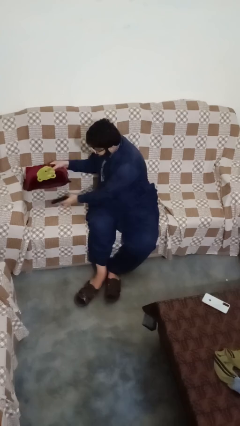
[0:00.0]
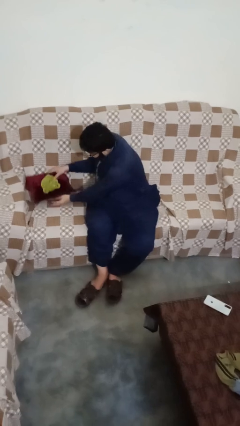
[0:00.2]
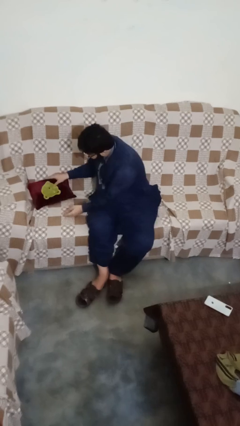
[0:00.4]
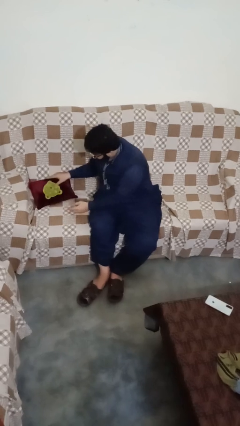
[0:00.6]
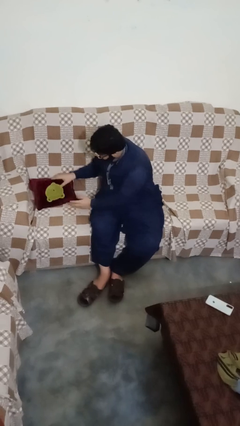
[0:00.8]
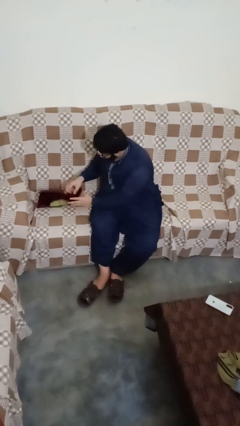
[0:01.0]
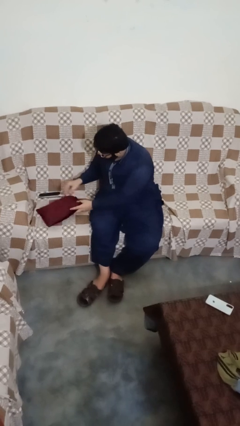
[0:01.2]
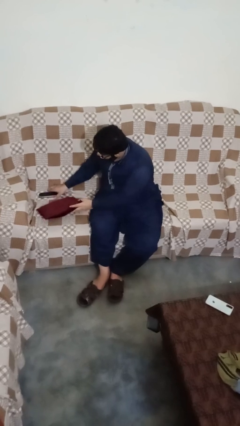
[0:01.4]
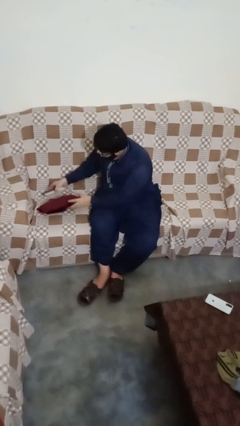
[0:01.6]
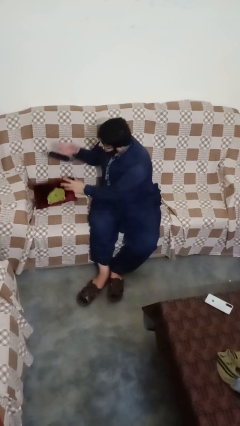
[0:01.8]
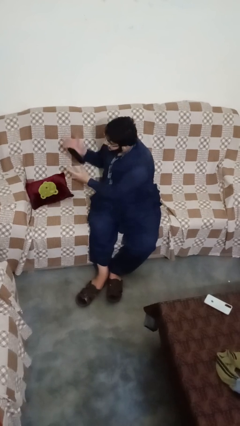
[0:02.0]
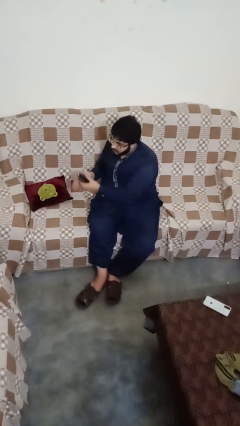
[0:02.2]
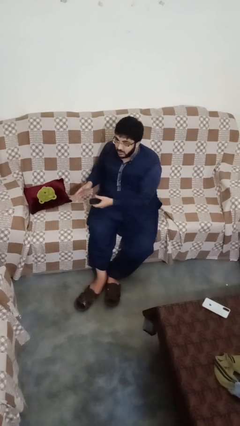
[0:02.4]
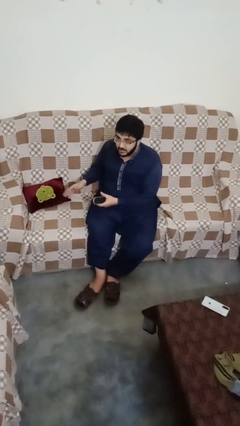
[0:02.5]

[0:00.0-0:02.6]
person searches in couch

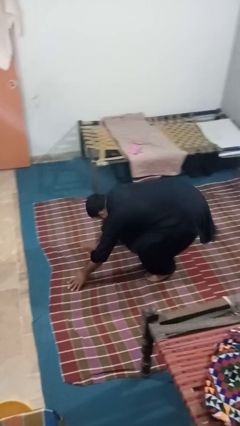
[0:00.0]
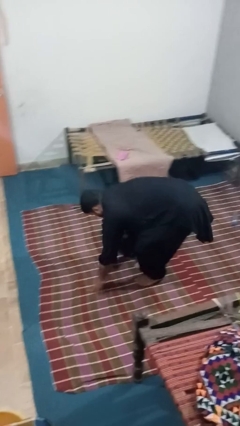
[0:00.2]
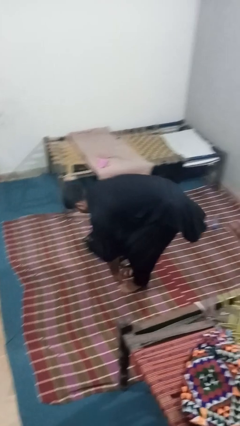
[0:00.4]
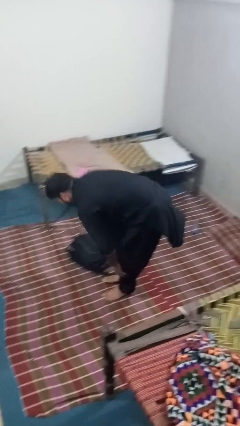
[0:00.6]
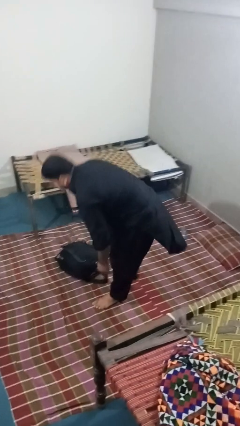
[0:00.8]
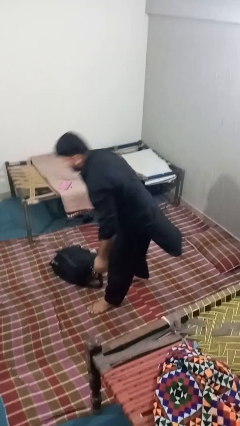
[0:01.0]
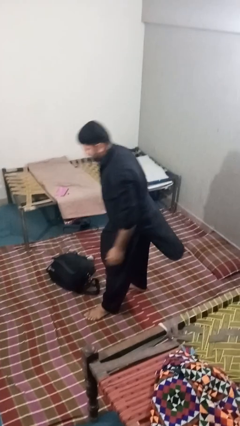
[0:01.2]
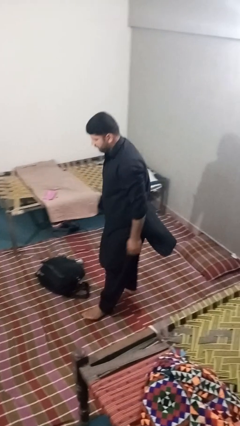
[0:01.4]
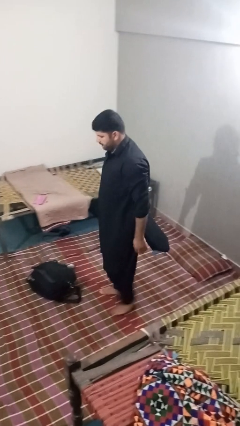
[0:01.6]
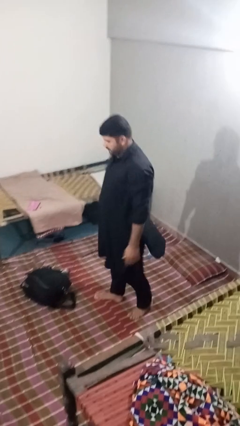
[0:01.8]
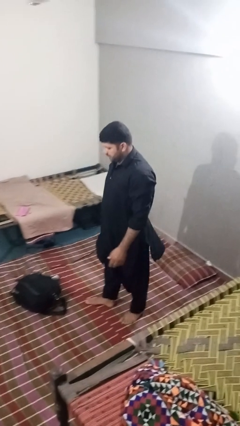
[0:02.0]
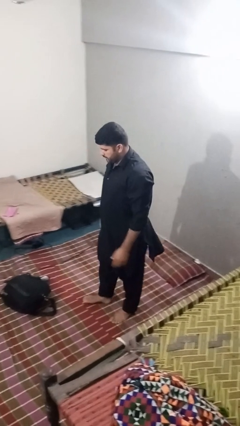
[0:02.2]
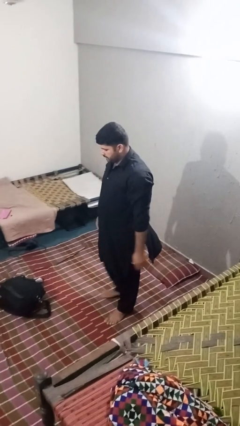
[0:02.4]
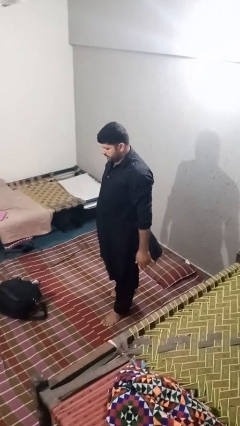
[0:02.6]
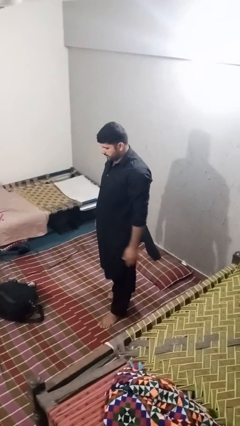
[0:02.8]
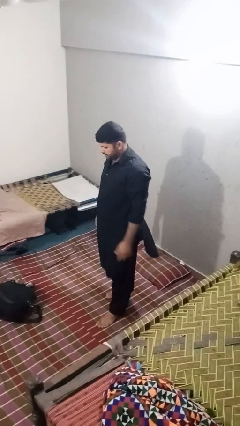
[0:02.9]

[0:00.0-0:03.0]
person stands up from floor

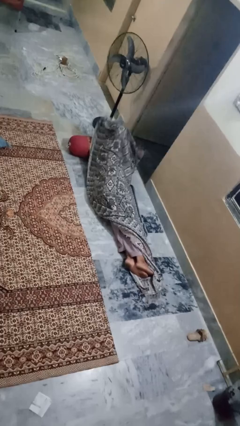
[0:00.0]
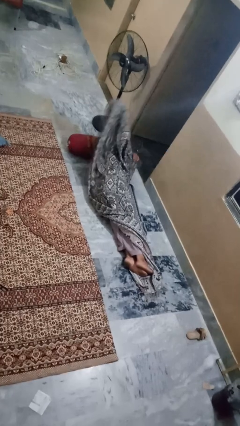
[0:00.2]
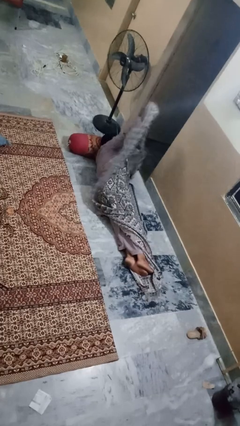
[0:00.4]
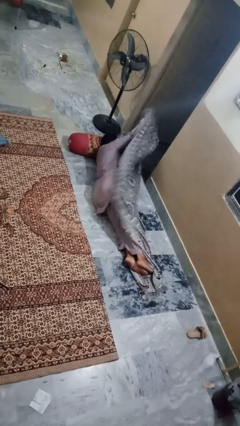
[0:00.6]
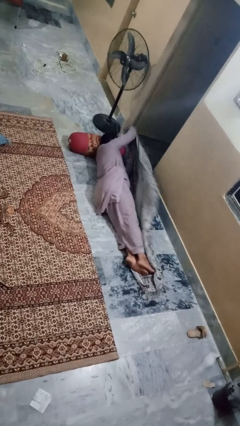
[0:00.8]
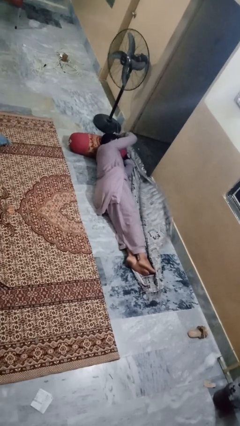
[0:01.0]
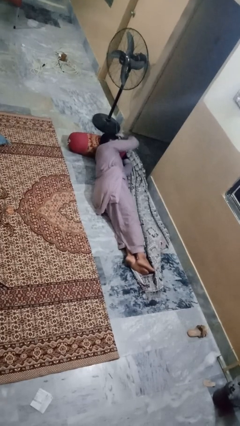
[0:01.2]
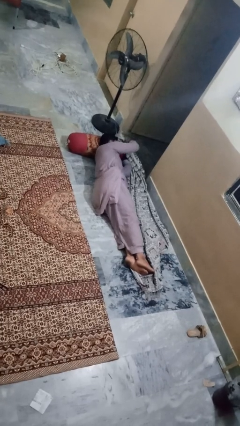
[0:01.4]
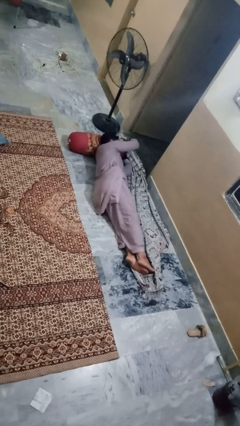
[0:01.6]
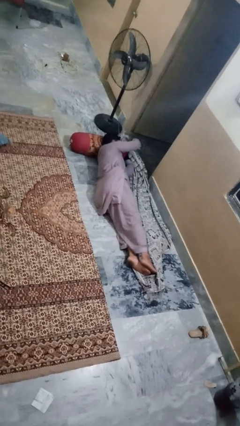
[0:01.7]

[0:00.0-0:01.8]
person uncovers with blanket

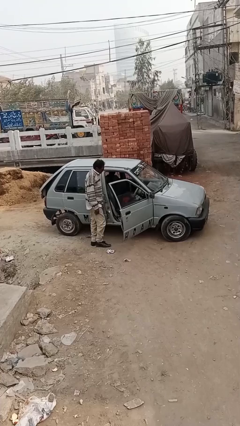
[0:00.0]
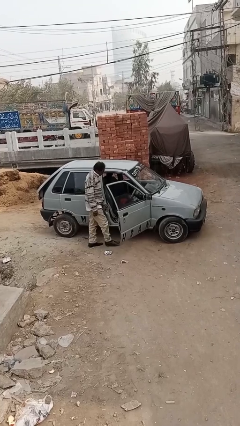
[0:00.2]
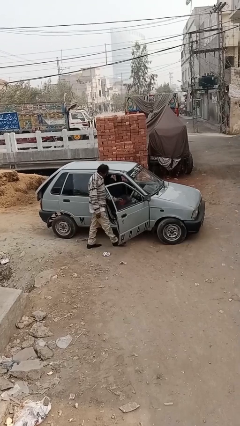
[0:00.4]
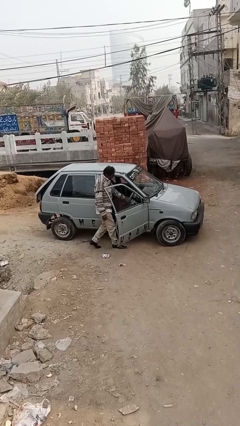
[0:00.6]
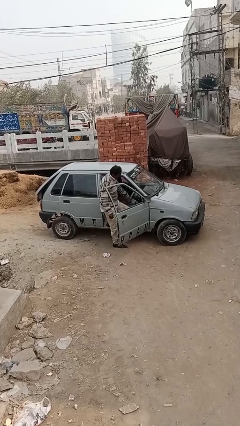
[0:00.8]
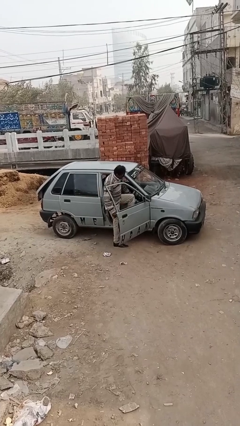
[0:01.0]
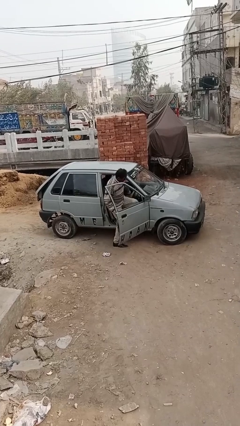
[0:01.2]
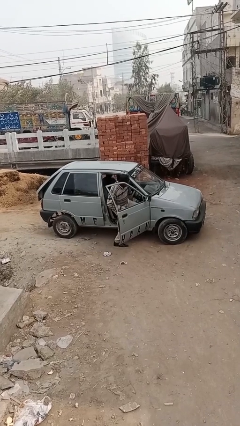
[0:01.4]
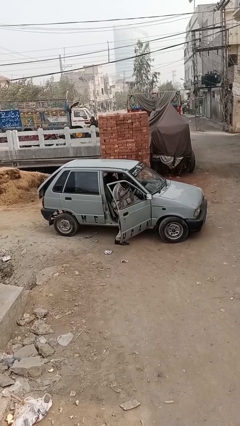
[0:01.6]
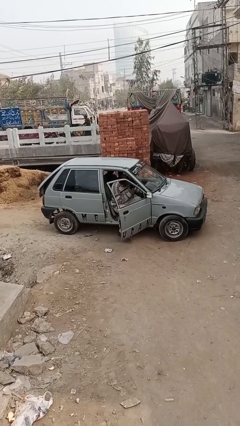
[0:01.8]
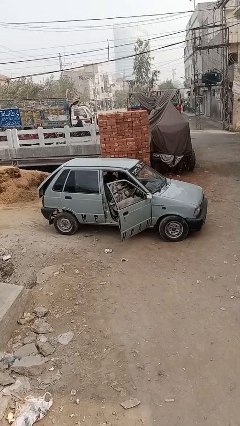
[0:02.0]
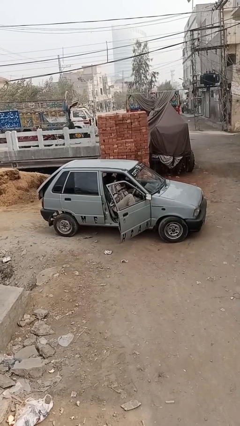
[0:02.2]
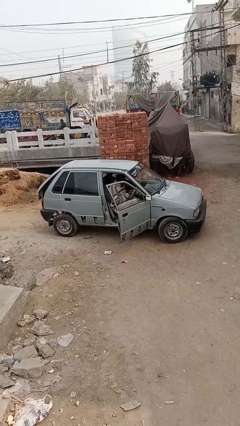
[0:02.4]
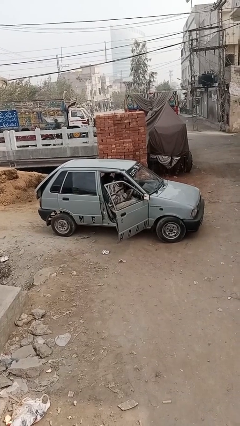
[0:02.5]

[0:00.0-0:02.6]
person enters car

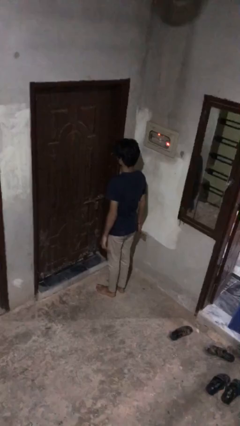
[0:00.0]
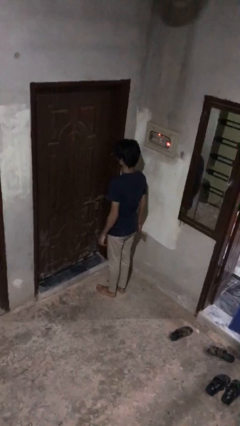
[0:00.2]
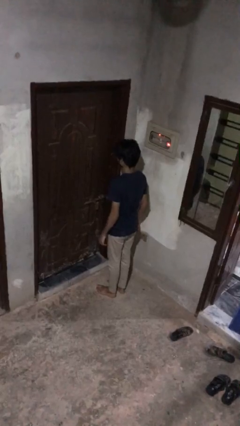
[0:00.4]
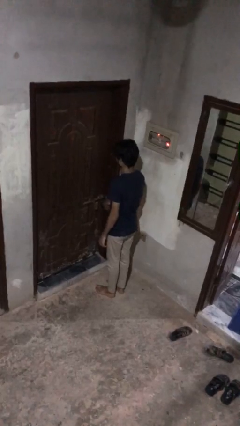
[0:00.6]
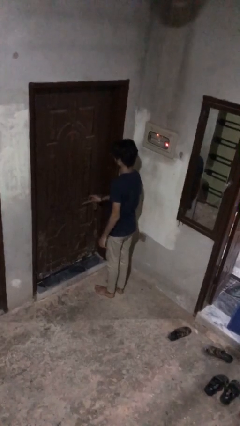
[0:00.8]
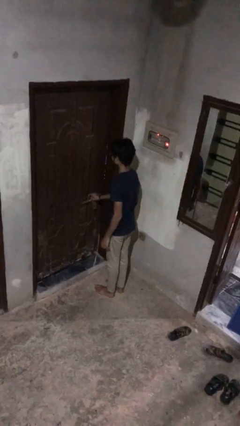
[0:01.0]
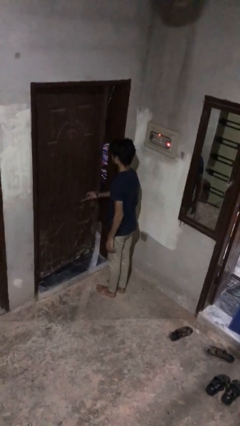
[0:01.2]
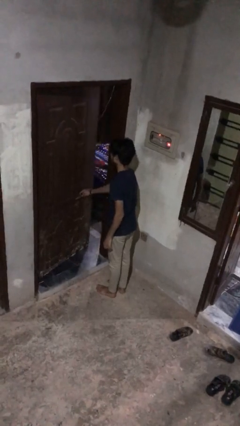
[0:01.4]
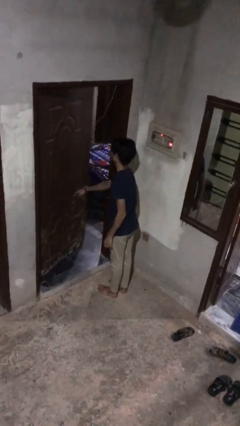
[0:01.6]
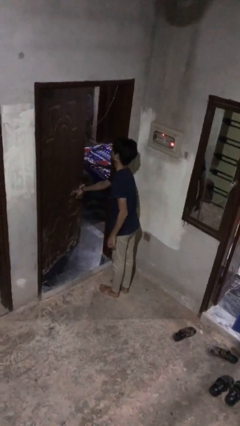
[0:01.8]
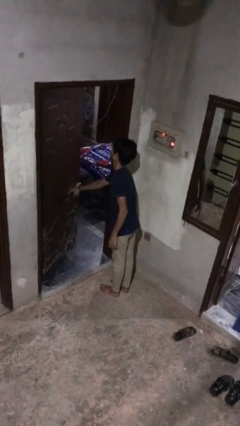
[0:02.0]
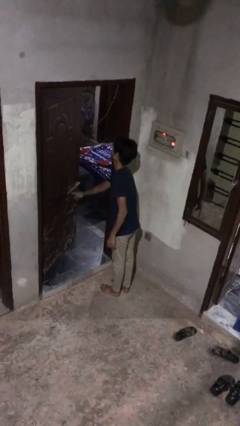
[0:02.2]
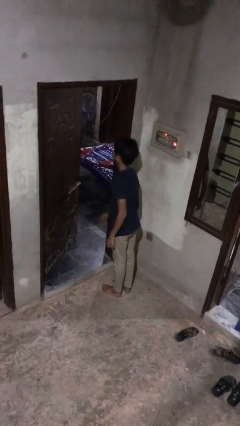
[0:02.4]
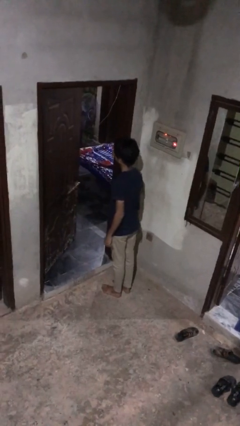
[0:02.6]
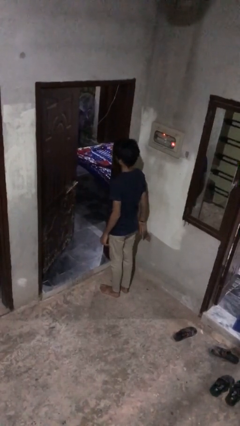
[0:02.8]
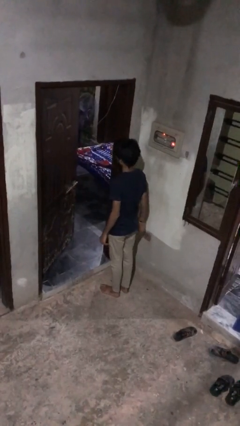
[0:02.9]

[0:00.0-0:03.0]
person opens facility door

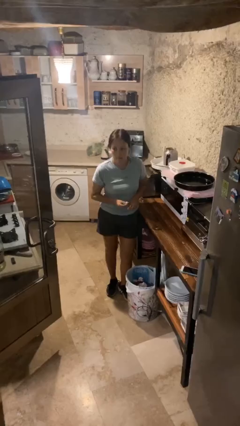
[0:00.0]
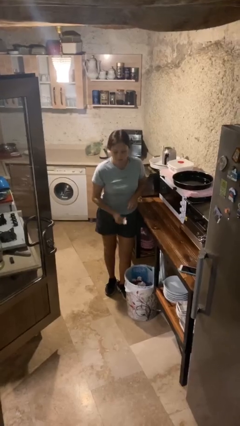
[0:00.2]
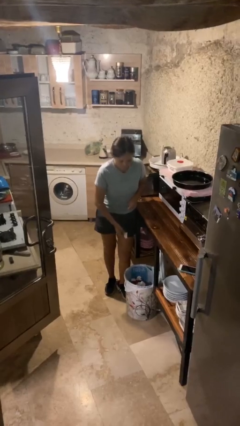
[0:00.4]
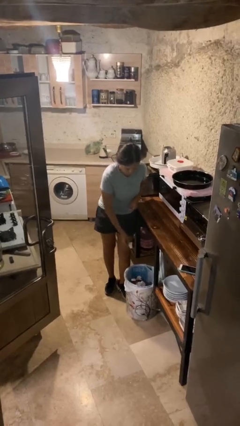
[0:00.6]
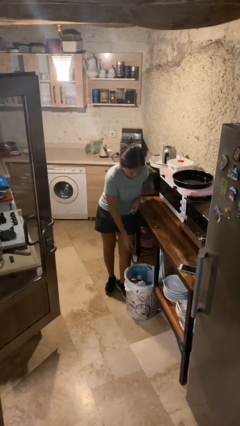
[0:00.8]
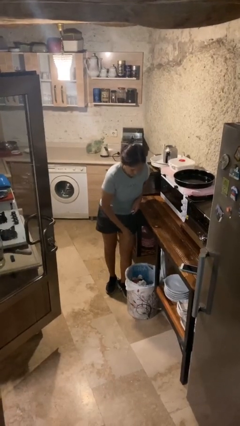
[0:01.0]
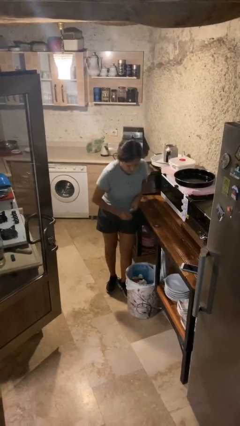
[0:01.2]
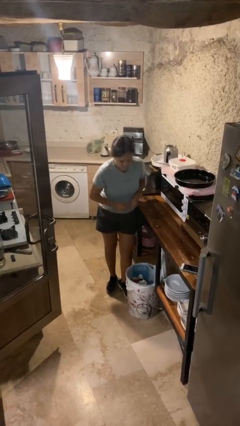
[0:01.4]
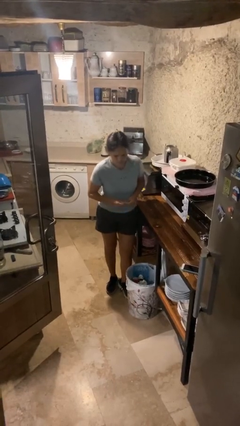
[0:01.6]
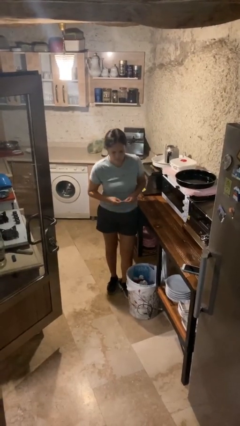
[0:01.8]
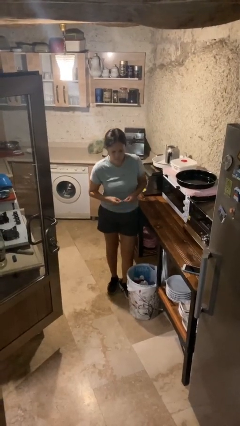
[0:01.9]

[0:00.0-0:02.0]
person discards trash

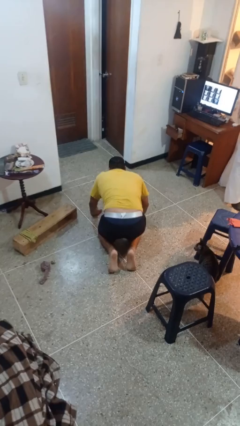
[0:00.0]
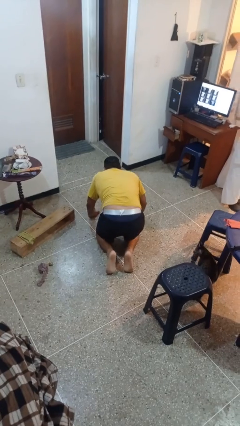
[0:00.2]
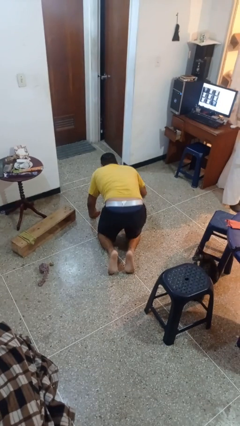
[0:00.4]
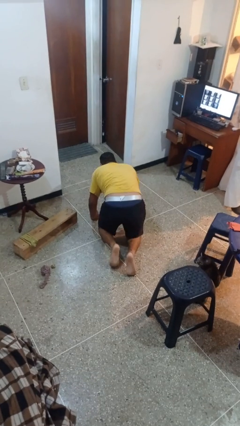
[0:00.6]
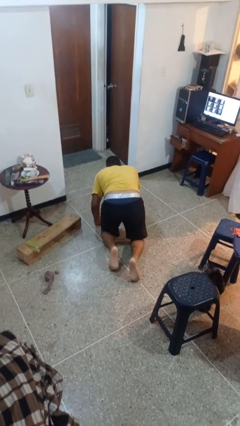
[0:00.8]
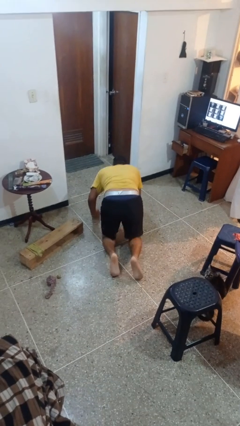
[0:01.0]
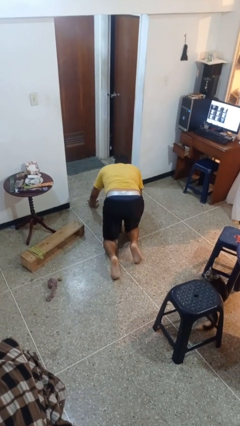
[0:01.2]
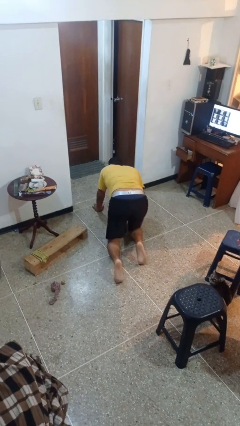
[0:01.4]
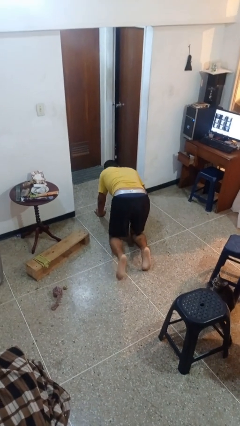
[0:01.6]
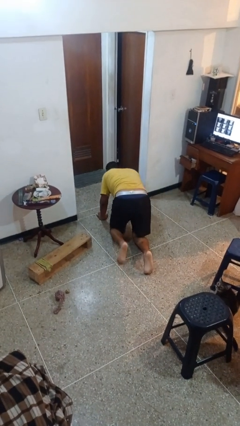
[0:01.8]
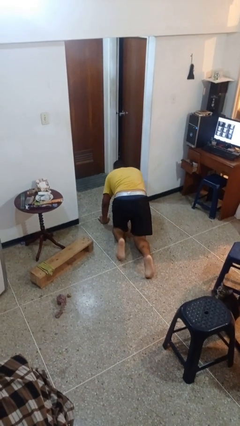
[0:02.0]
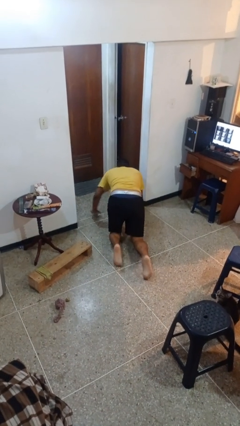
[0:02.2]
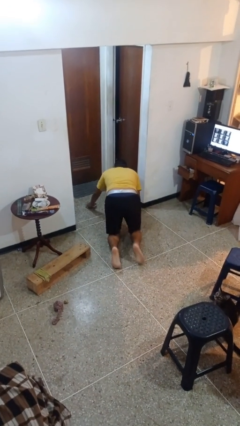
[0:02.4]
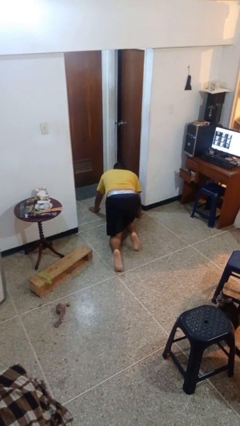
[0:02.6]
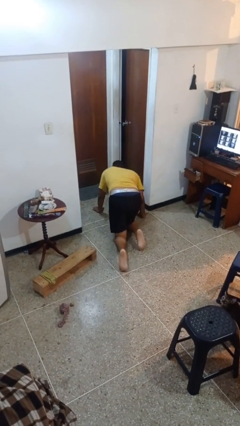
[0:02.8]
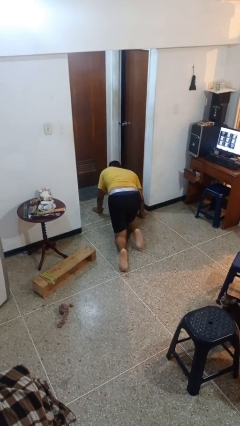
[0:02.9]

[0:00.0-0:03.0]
person crawls
